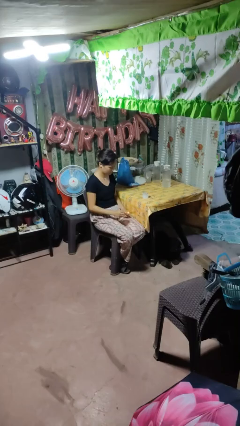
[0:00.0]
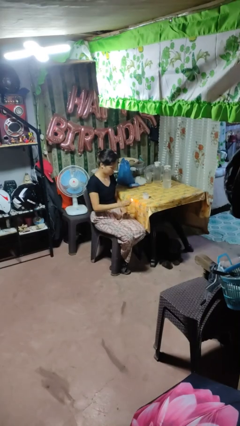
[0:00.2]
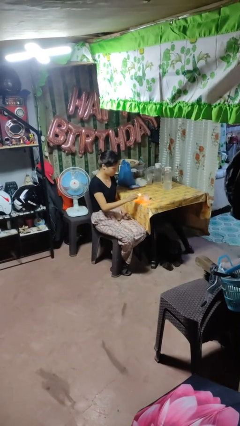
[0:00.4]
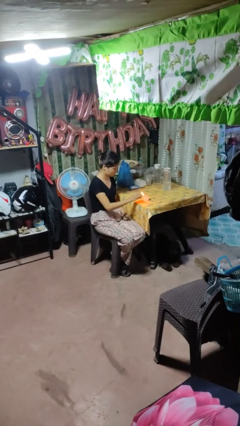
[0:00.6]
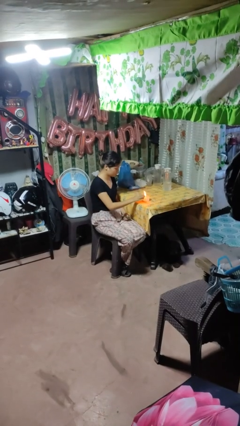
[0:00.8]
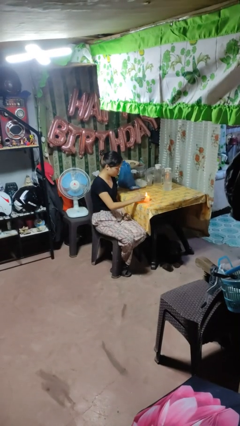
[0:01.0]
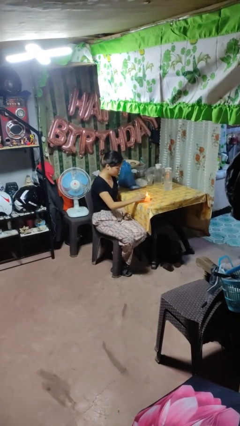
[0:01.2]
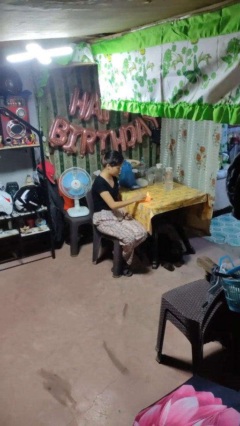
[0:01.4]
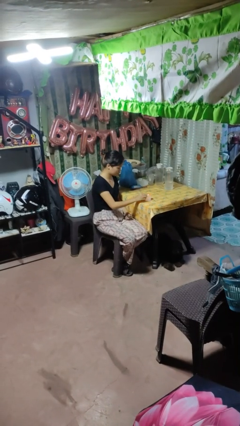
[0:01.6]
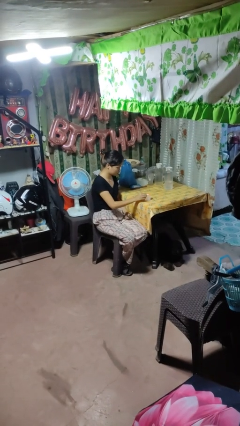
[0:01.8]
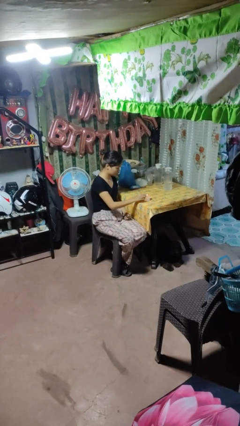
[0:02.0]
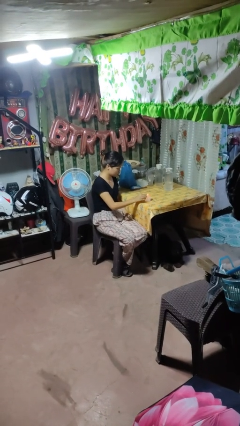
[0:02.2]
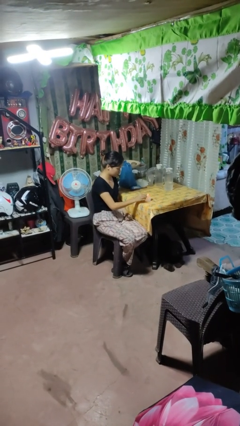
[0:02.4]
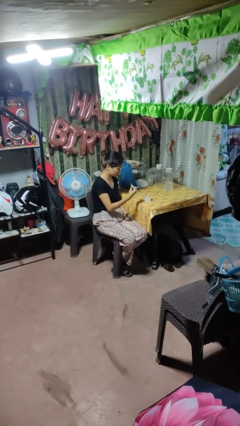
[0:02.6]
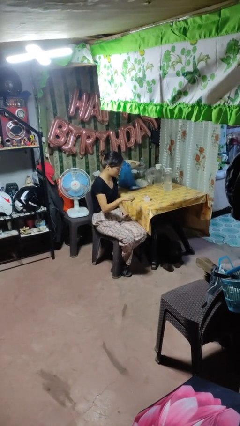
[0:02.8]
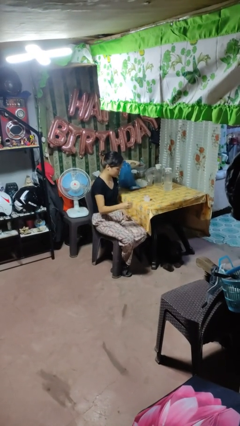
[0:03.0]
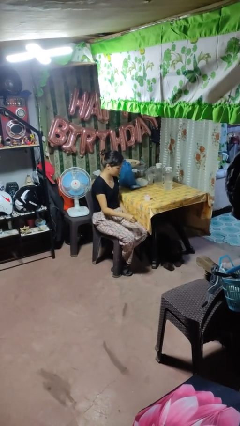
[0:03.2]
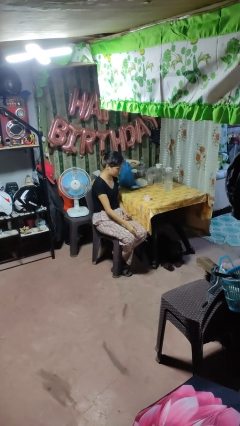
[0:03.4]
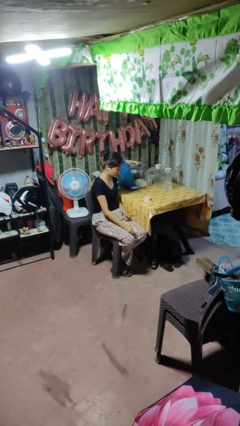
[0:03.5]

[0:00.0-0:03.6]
person lights candle

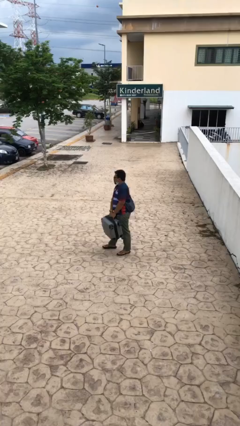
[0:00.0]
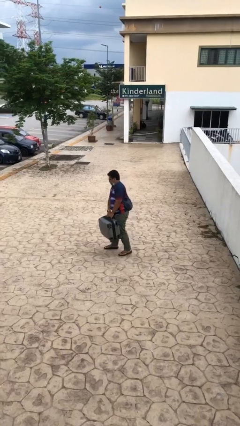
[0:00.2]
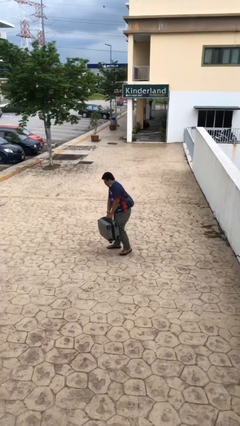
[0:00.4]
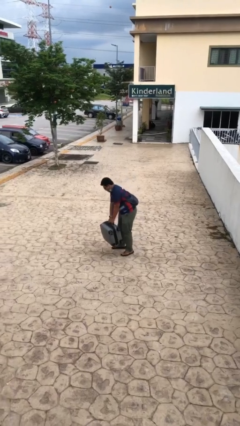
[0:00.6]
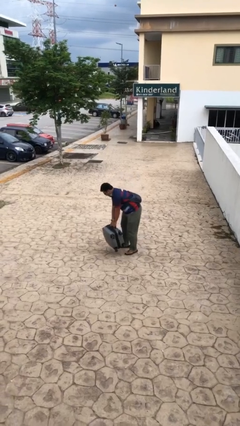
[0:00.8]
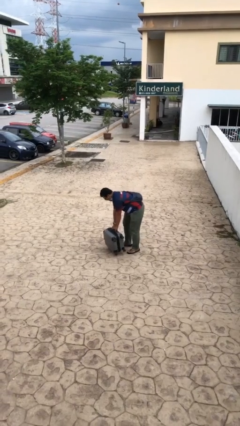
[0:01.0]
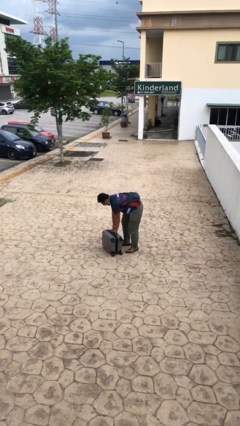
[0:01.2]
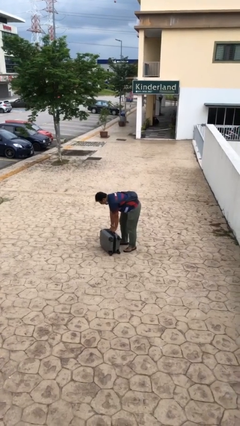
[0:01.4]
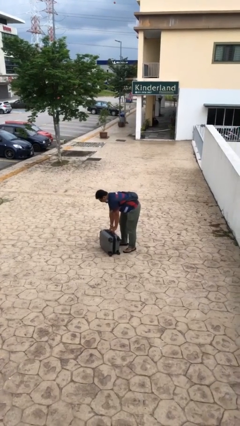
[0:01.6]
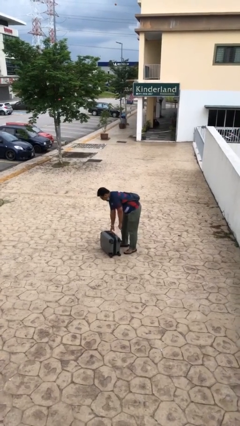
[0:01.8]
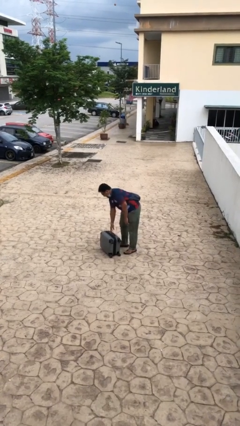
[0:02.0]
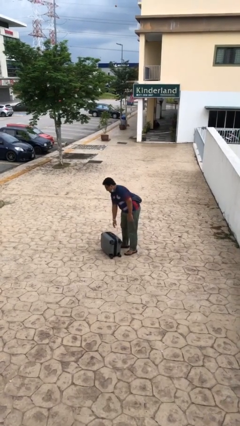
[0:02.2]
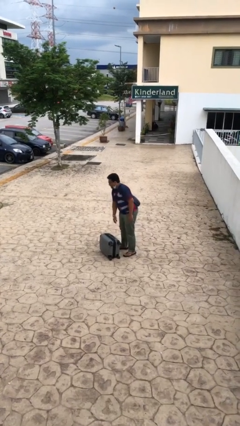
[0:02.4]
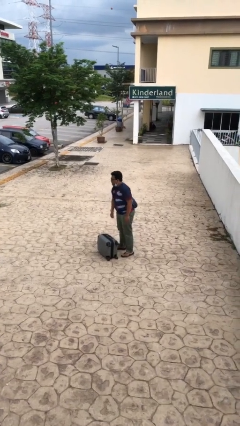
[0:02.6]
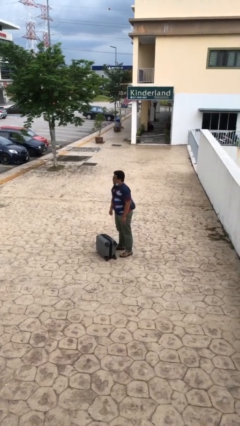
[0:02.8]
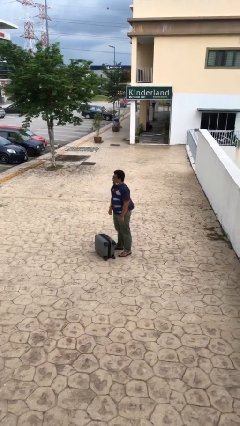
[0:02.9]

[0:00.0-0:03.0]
person puts down object on floor

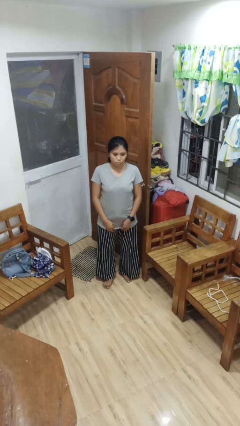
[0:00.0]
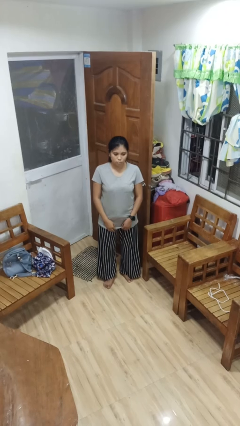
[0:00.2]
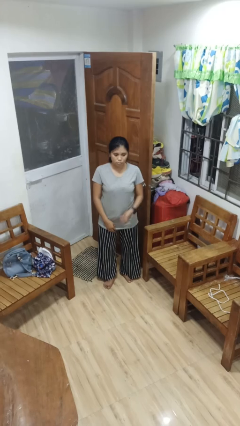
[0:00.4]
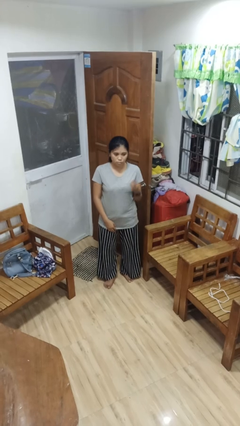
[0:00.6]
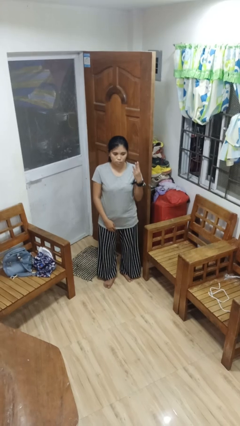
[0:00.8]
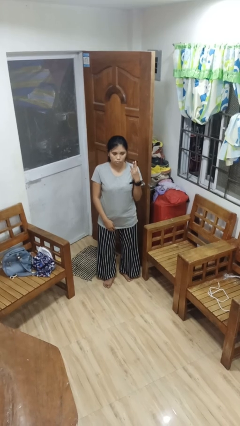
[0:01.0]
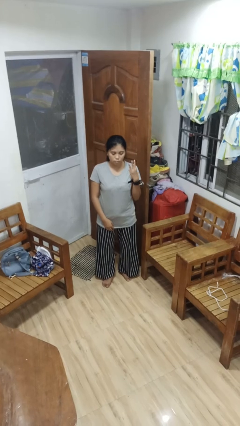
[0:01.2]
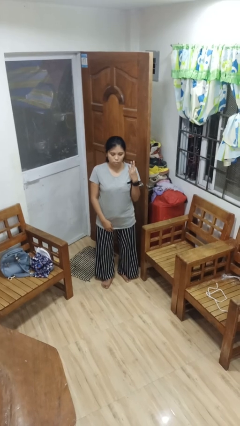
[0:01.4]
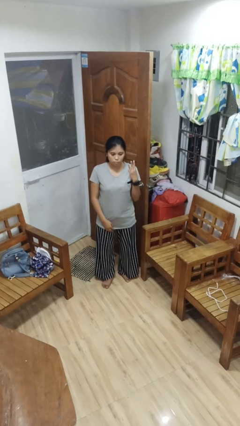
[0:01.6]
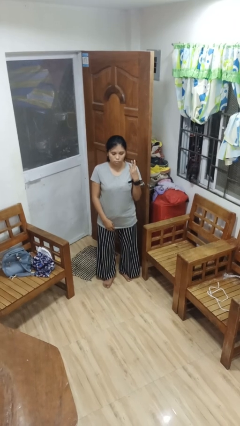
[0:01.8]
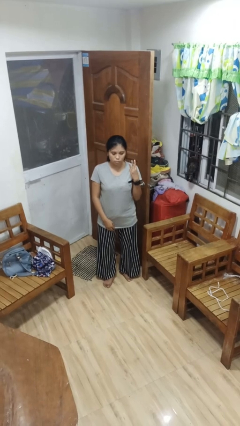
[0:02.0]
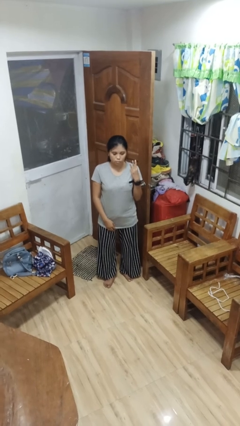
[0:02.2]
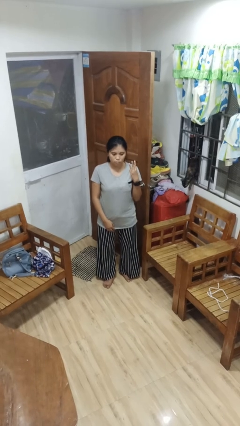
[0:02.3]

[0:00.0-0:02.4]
person gestures number three

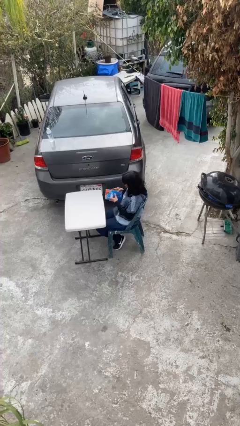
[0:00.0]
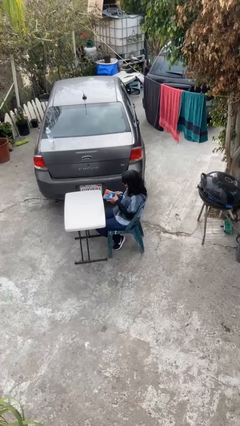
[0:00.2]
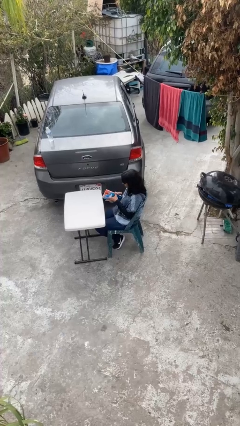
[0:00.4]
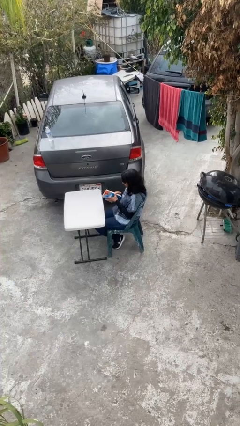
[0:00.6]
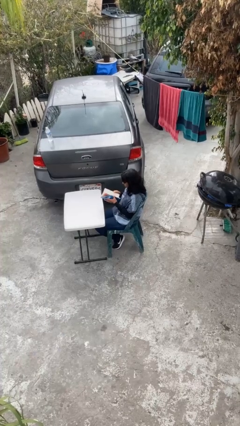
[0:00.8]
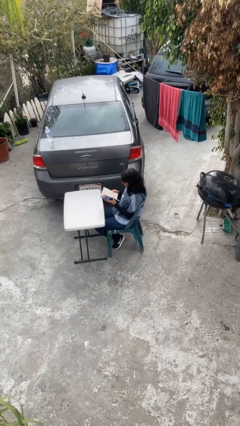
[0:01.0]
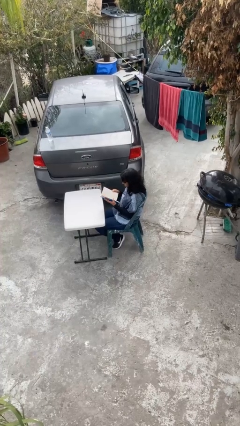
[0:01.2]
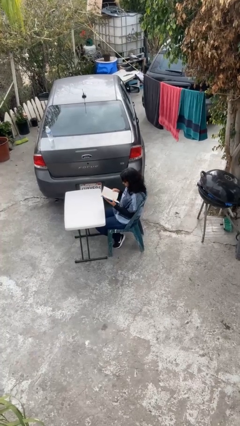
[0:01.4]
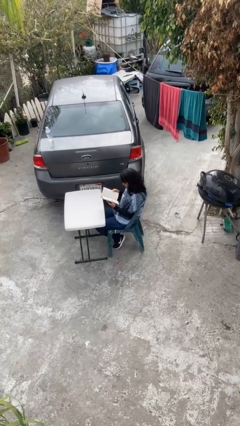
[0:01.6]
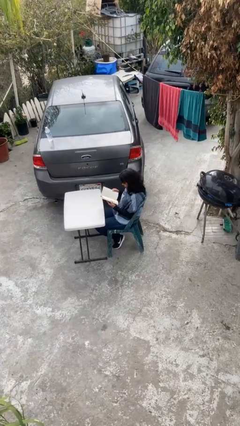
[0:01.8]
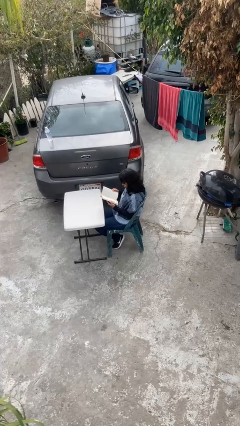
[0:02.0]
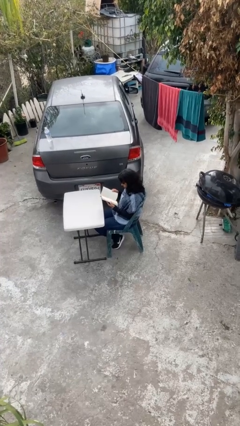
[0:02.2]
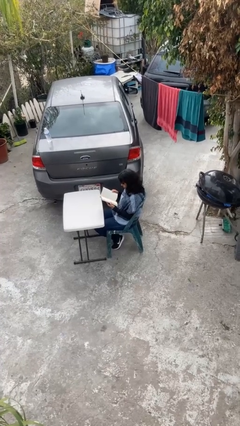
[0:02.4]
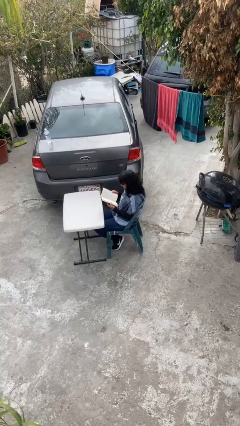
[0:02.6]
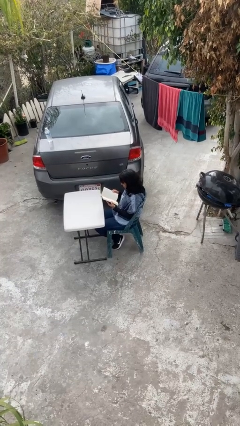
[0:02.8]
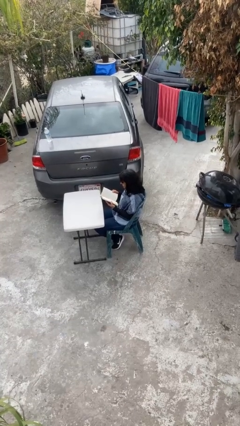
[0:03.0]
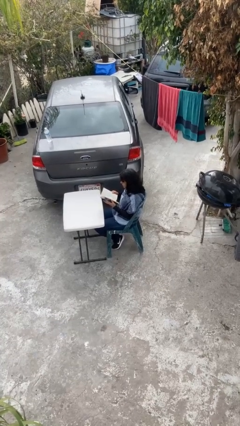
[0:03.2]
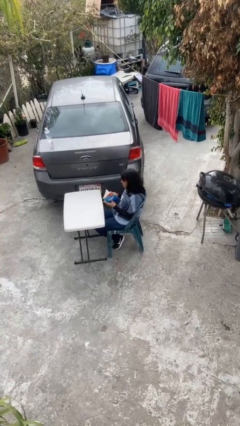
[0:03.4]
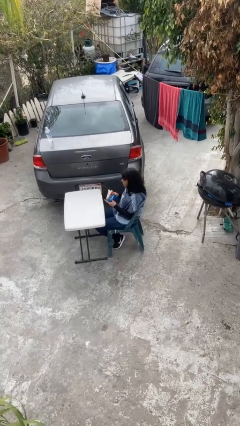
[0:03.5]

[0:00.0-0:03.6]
person reads document

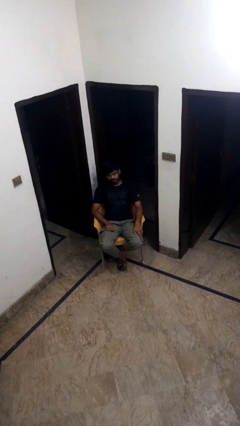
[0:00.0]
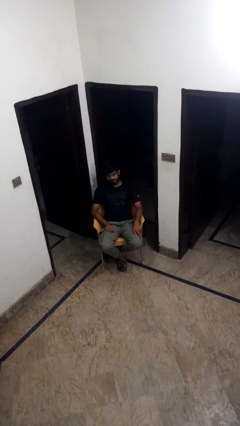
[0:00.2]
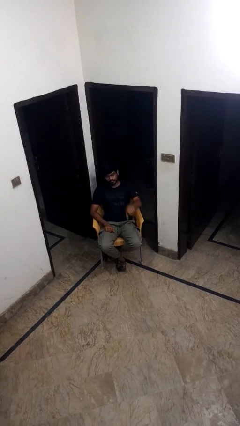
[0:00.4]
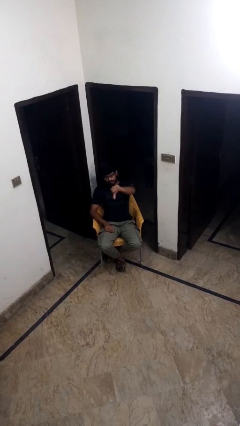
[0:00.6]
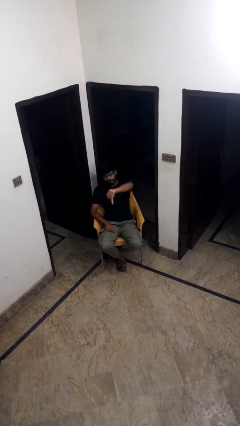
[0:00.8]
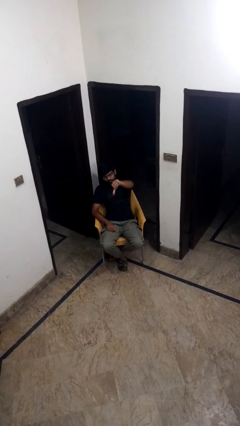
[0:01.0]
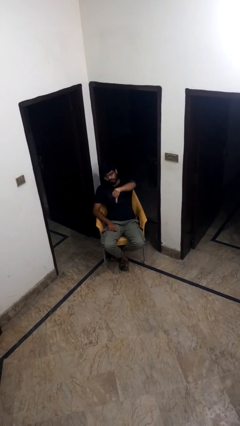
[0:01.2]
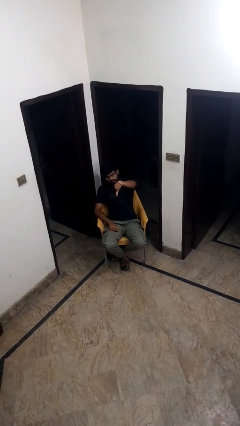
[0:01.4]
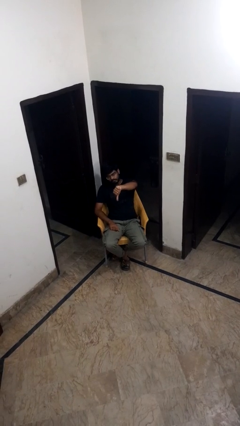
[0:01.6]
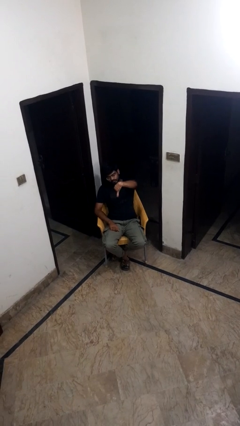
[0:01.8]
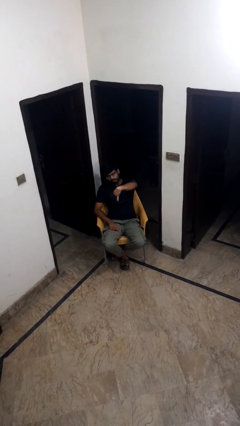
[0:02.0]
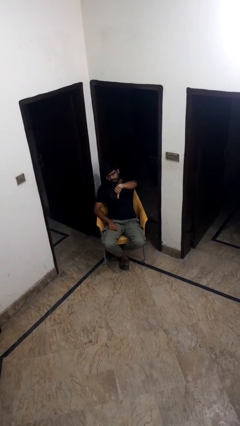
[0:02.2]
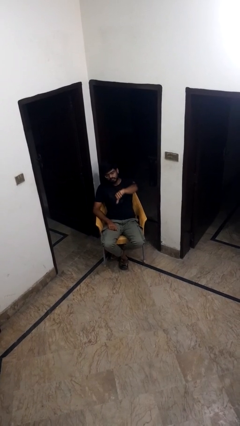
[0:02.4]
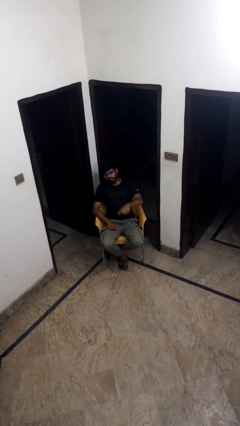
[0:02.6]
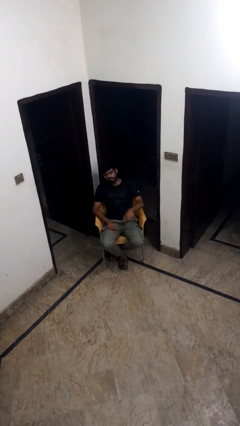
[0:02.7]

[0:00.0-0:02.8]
person gestures thumbs down

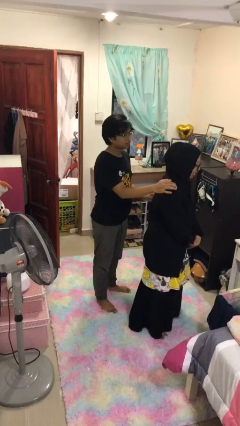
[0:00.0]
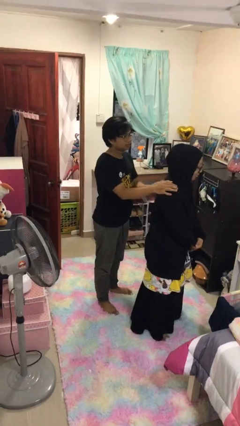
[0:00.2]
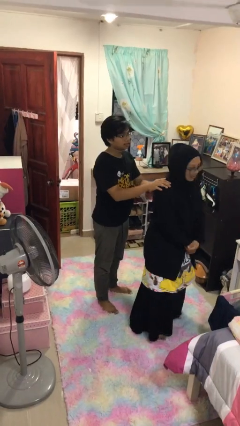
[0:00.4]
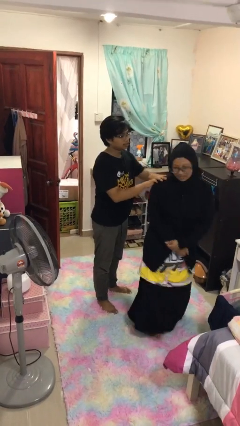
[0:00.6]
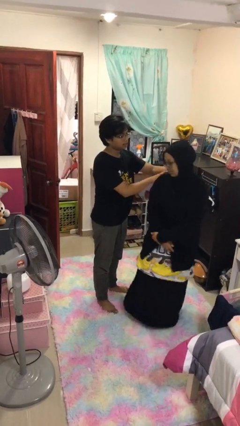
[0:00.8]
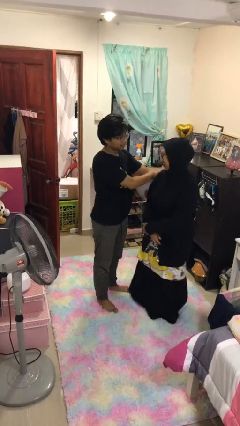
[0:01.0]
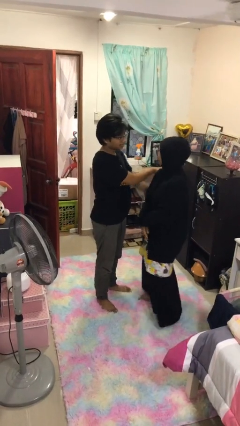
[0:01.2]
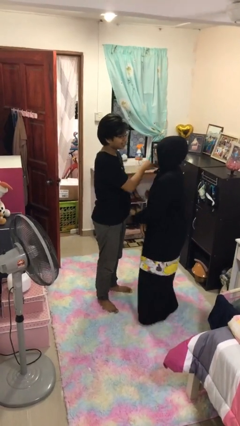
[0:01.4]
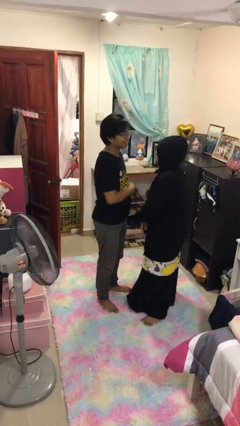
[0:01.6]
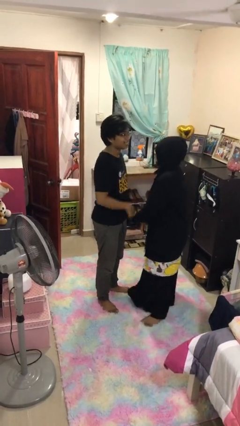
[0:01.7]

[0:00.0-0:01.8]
person spins person around

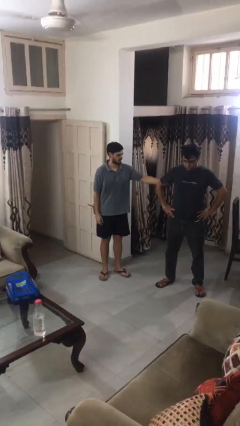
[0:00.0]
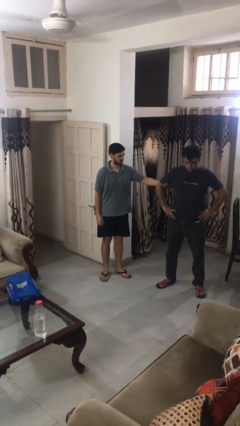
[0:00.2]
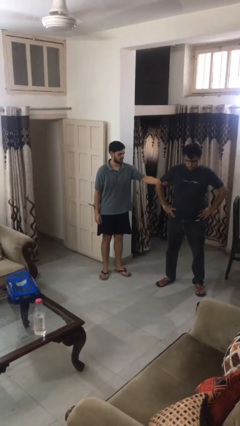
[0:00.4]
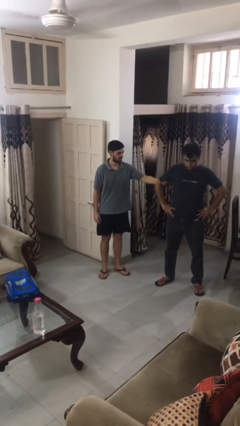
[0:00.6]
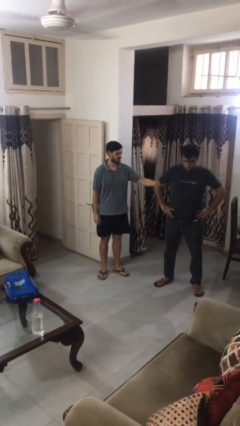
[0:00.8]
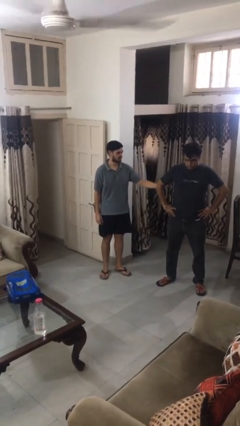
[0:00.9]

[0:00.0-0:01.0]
person grabs person by bicep
